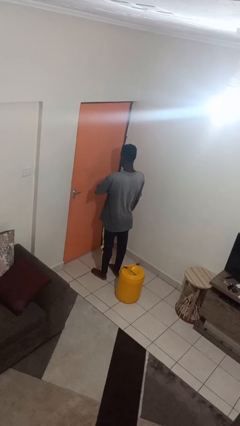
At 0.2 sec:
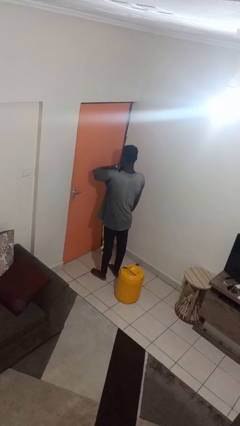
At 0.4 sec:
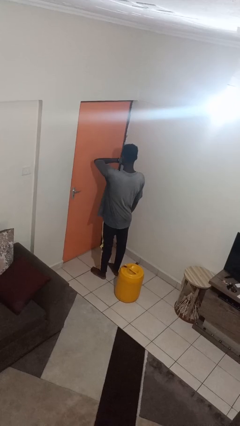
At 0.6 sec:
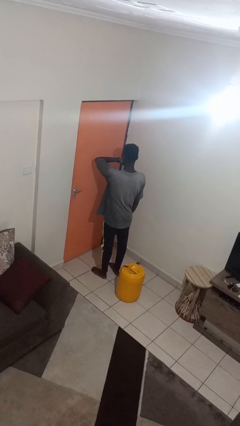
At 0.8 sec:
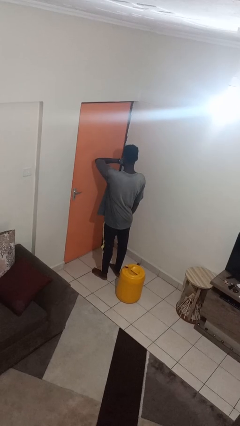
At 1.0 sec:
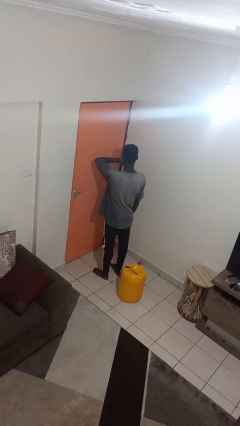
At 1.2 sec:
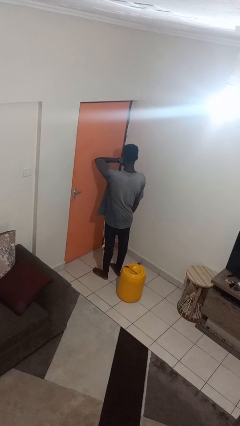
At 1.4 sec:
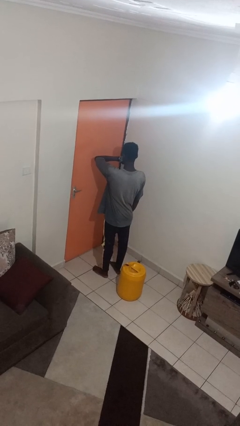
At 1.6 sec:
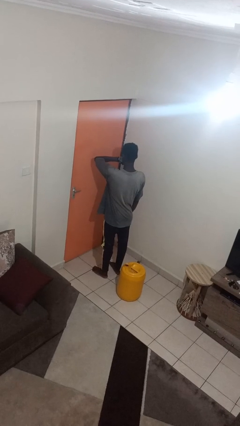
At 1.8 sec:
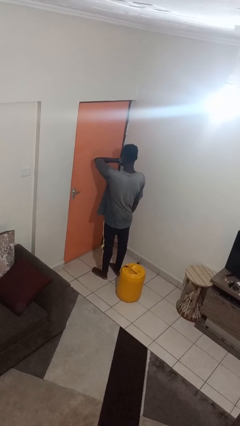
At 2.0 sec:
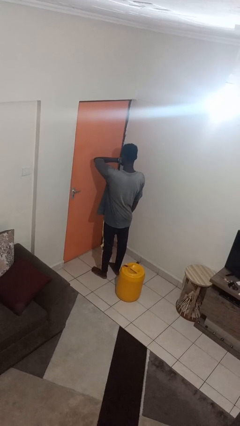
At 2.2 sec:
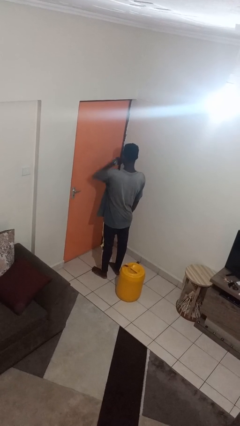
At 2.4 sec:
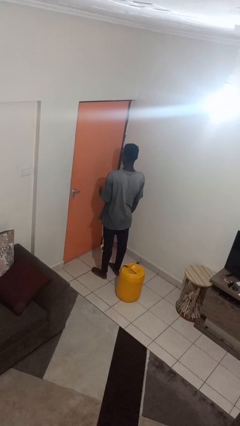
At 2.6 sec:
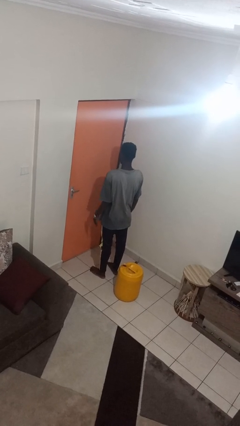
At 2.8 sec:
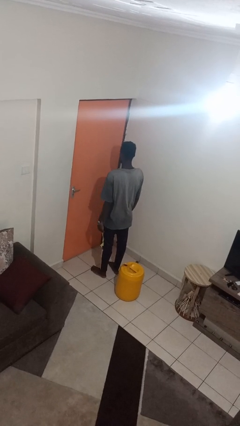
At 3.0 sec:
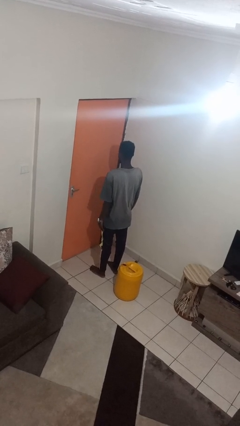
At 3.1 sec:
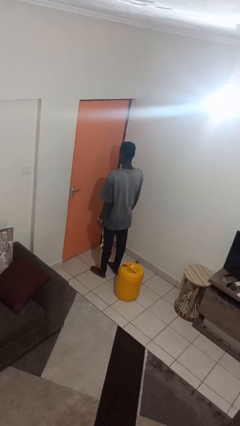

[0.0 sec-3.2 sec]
person looks at wristwatch

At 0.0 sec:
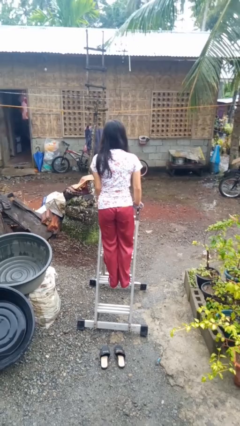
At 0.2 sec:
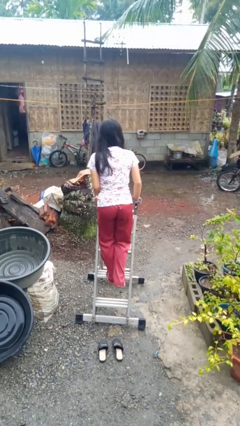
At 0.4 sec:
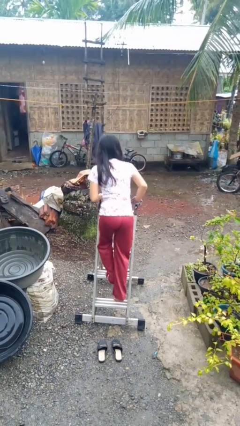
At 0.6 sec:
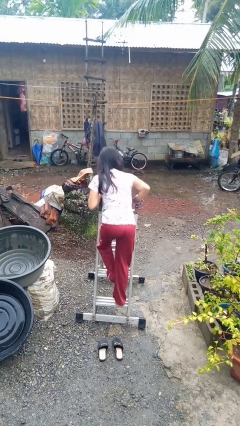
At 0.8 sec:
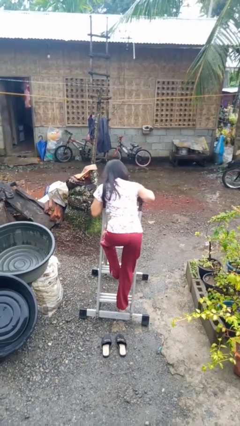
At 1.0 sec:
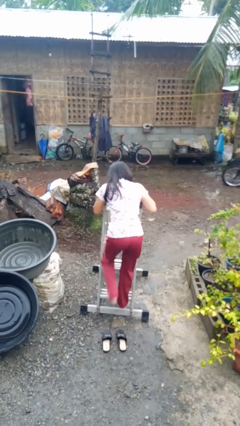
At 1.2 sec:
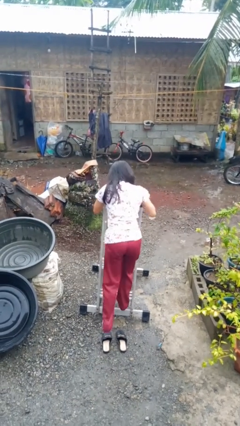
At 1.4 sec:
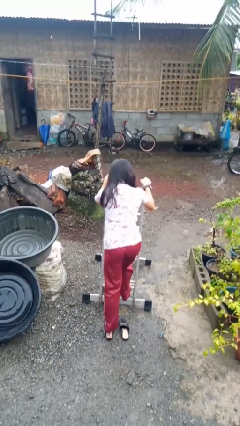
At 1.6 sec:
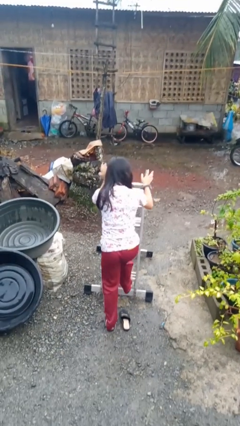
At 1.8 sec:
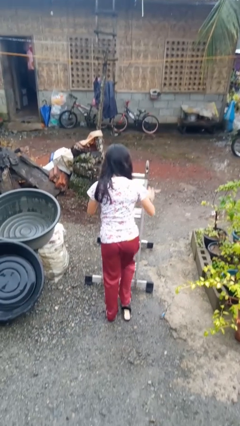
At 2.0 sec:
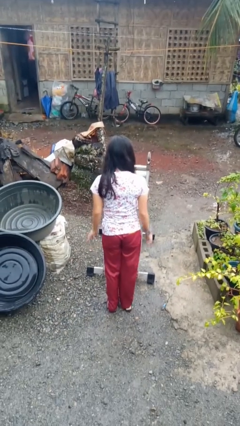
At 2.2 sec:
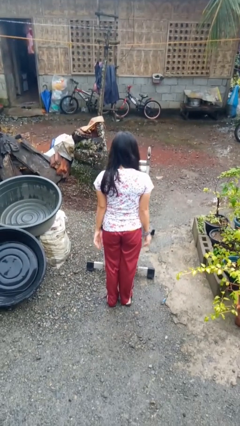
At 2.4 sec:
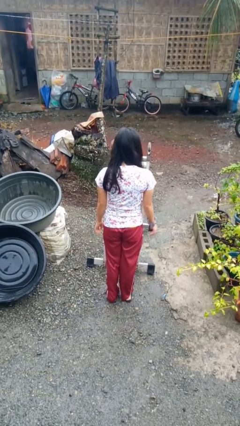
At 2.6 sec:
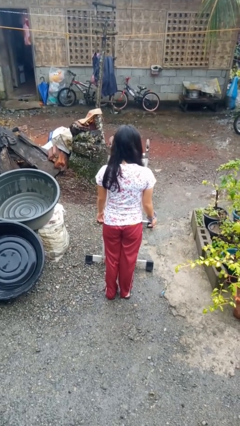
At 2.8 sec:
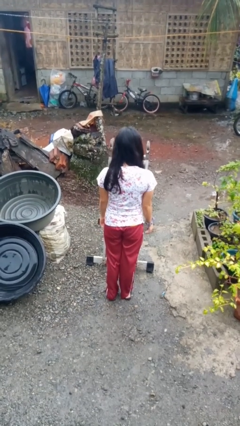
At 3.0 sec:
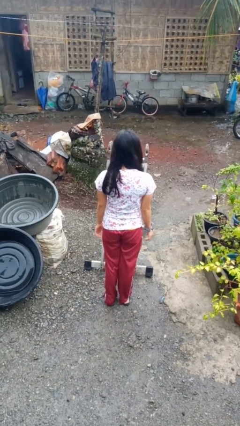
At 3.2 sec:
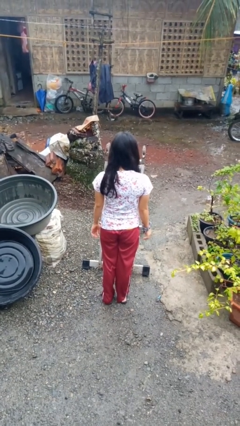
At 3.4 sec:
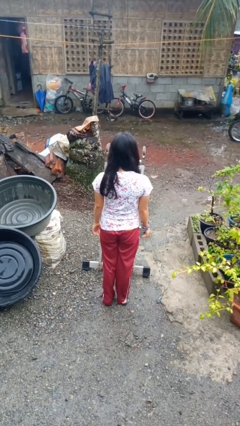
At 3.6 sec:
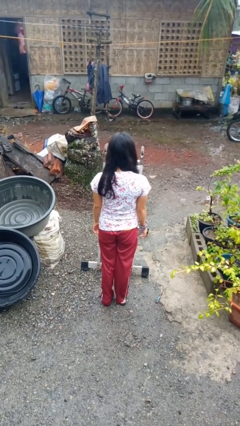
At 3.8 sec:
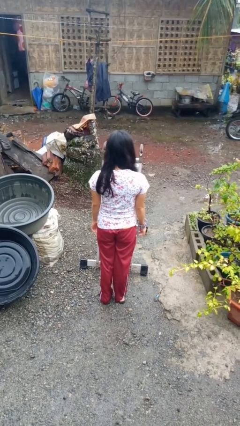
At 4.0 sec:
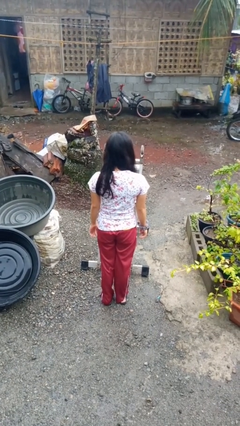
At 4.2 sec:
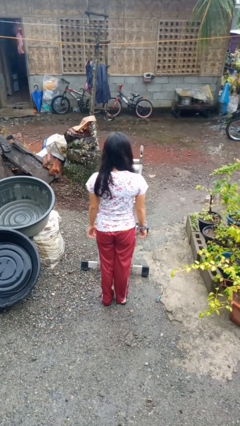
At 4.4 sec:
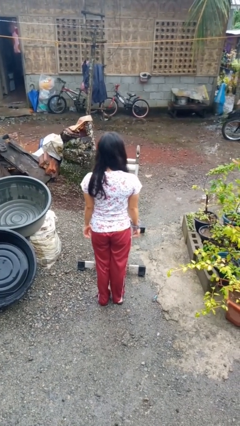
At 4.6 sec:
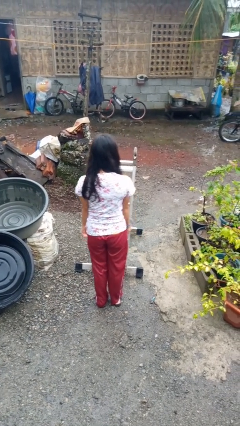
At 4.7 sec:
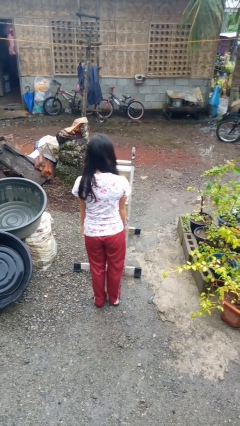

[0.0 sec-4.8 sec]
person climbs down ladder

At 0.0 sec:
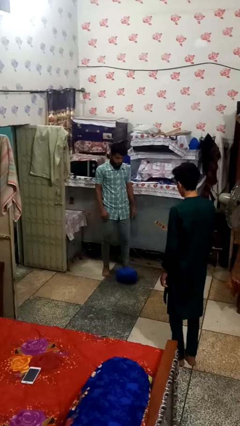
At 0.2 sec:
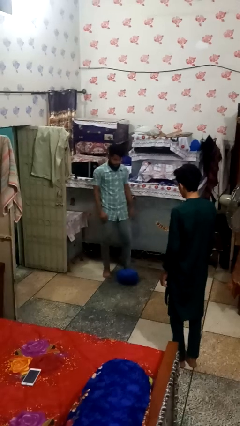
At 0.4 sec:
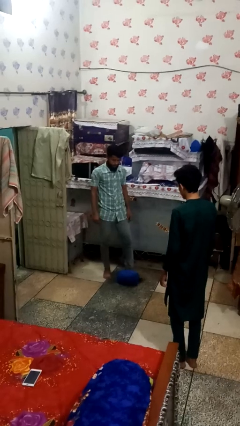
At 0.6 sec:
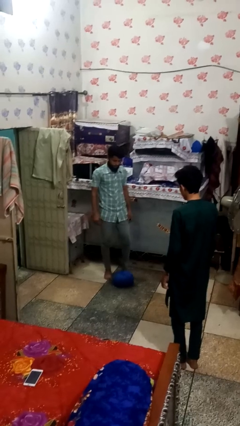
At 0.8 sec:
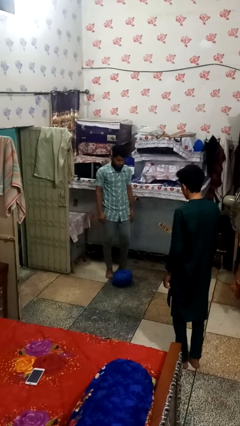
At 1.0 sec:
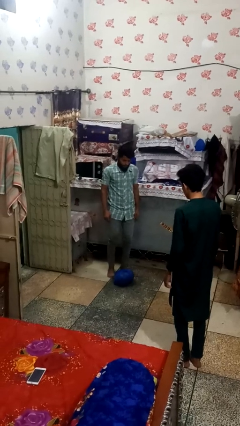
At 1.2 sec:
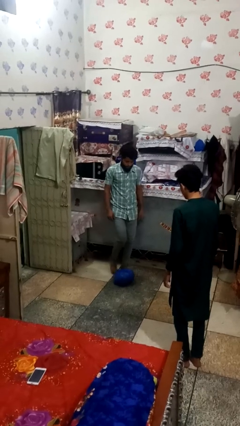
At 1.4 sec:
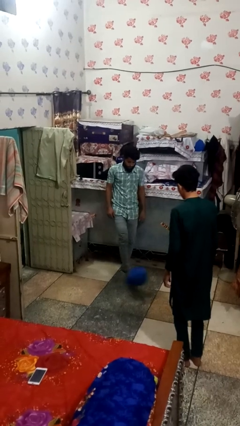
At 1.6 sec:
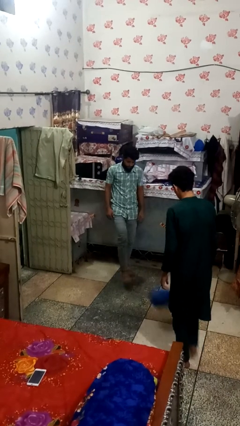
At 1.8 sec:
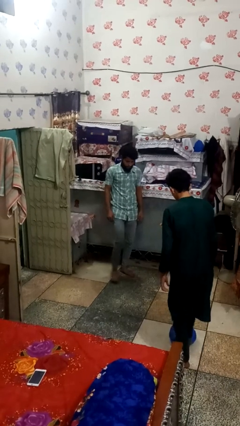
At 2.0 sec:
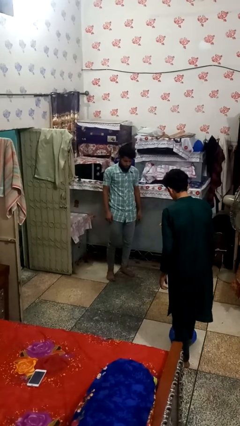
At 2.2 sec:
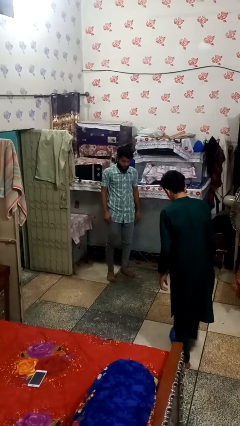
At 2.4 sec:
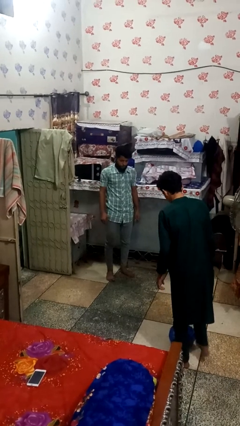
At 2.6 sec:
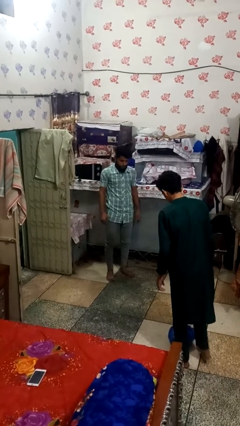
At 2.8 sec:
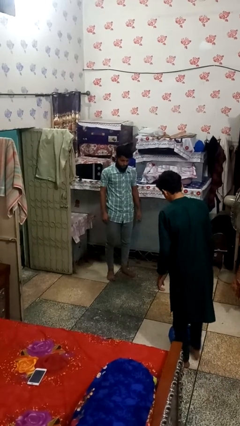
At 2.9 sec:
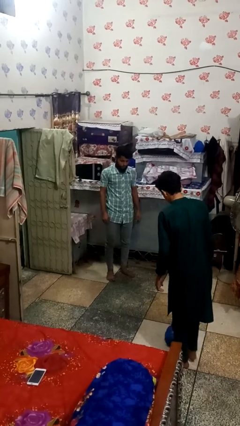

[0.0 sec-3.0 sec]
person kicks object to person

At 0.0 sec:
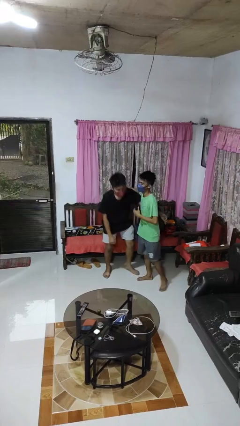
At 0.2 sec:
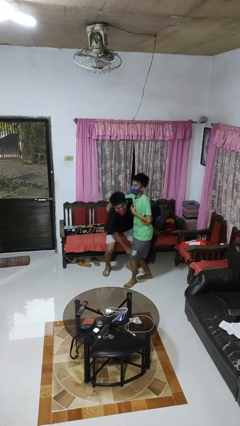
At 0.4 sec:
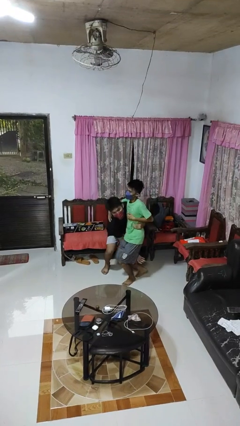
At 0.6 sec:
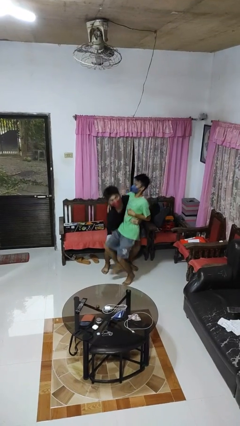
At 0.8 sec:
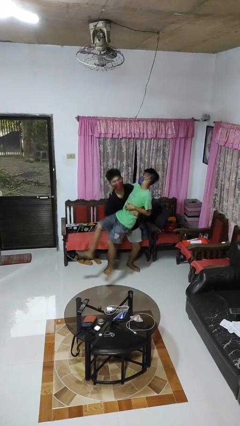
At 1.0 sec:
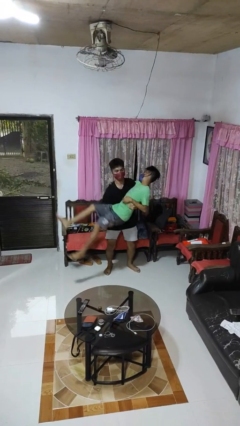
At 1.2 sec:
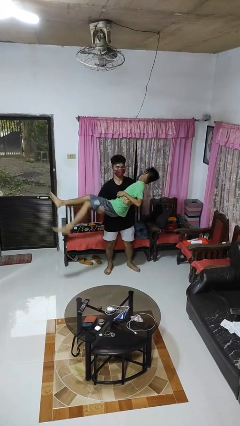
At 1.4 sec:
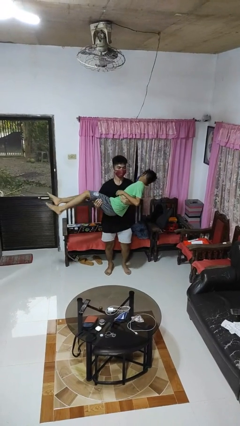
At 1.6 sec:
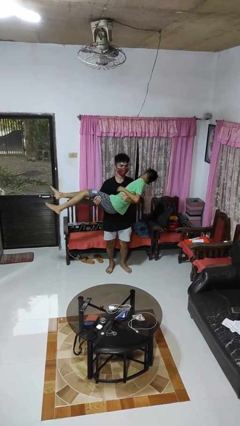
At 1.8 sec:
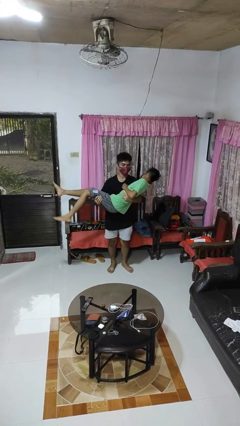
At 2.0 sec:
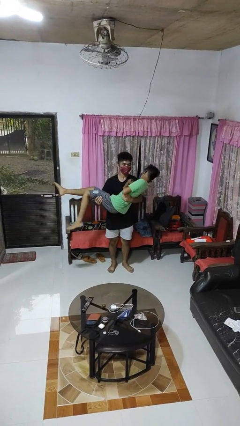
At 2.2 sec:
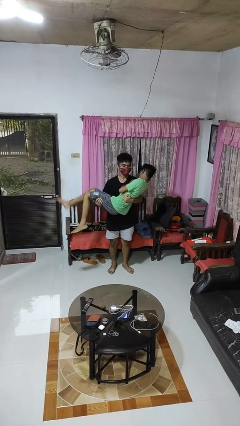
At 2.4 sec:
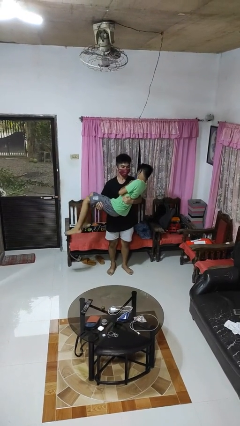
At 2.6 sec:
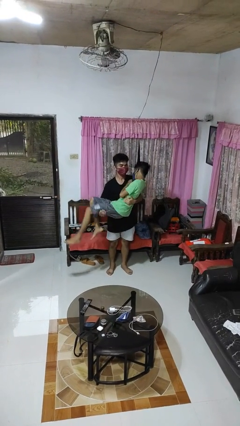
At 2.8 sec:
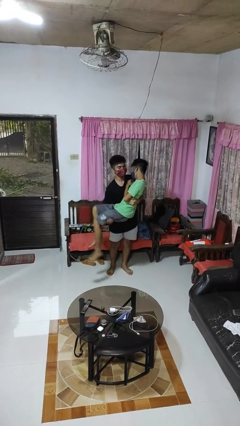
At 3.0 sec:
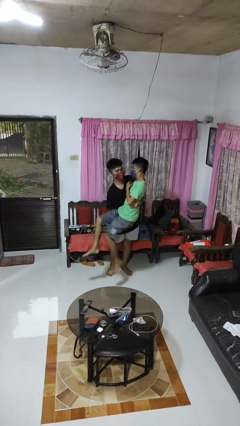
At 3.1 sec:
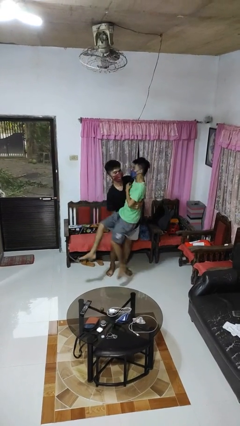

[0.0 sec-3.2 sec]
person picks up person

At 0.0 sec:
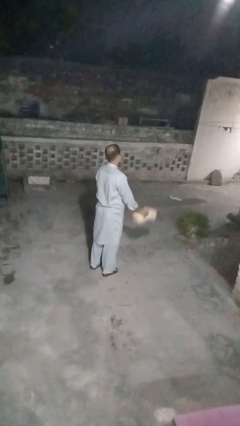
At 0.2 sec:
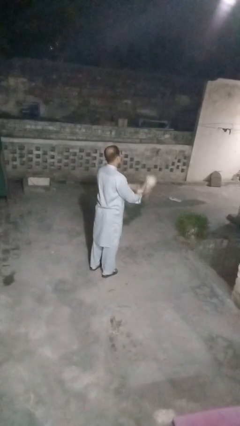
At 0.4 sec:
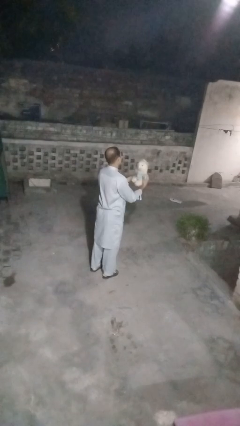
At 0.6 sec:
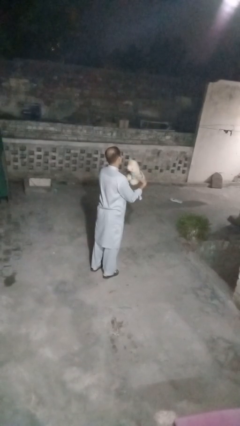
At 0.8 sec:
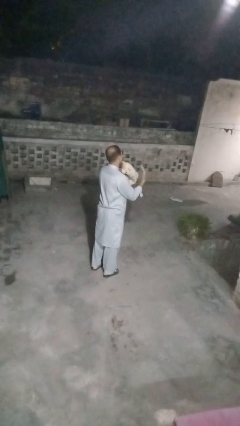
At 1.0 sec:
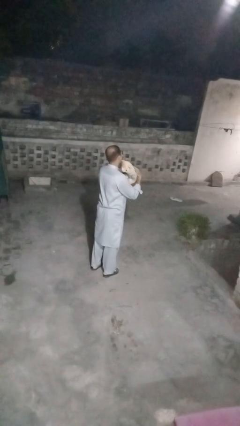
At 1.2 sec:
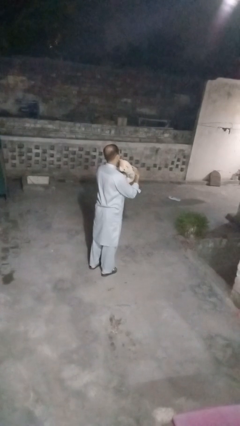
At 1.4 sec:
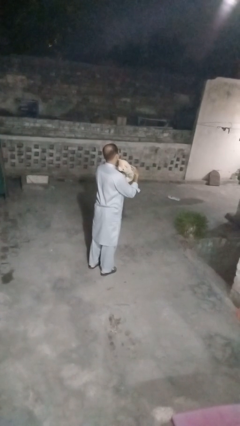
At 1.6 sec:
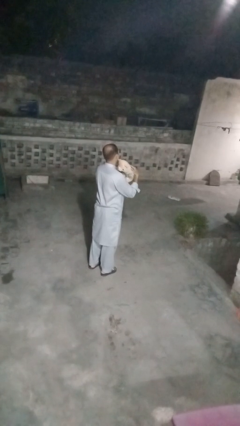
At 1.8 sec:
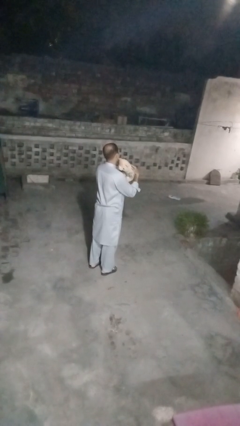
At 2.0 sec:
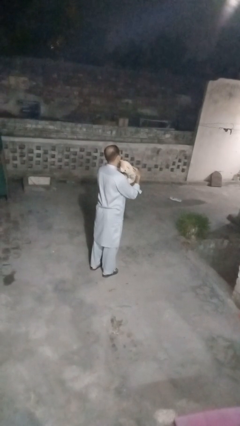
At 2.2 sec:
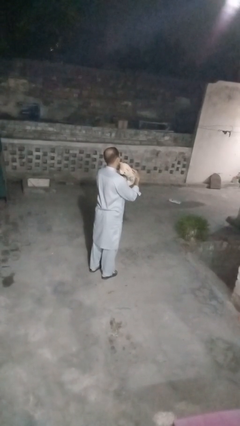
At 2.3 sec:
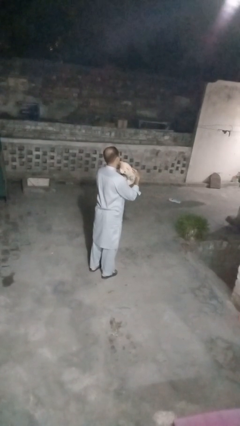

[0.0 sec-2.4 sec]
person hugs stuffed animal

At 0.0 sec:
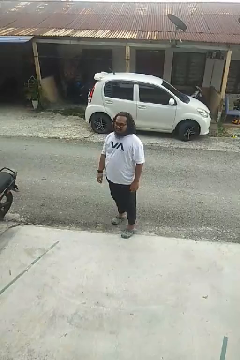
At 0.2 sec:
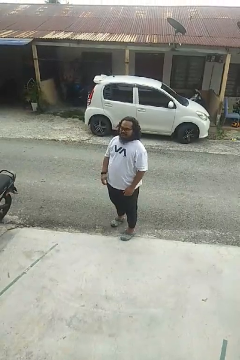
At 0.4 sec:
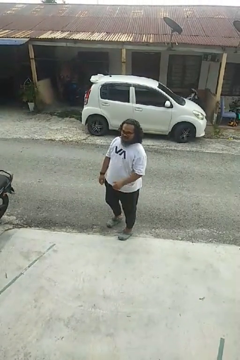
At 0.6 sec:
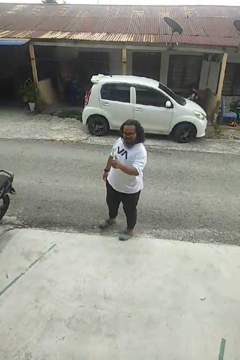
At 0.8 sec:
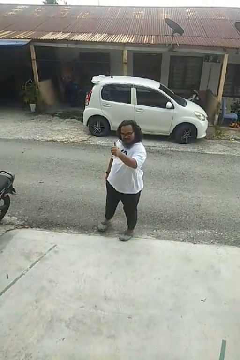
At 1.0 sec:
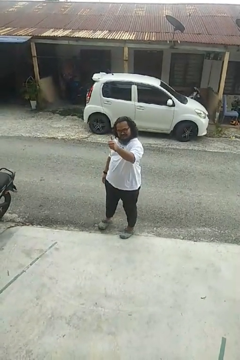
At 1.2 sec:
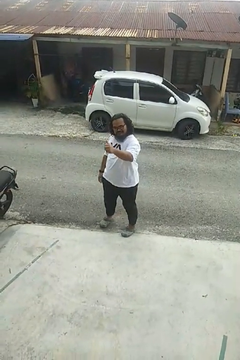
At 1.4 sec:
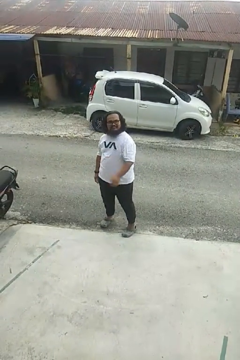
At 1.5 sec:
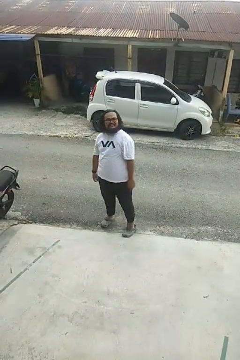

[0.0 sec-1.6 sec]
person gestures thumbs up
